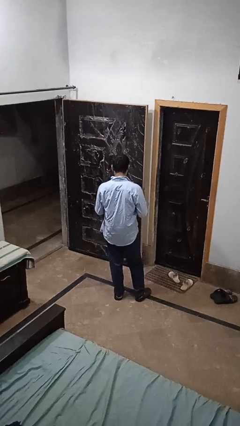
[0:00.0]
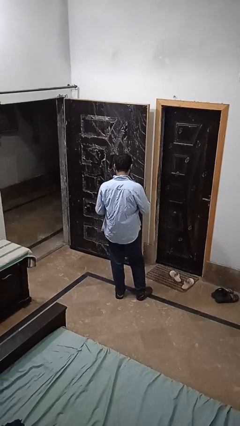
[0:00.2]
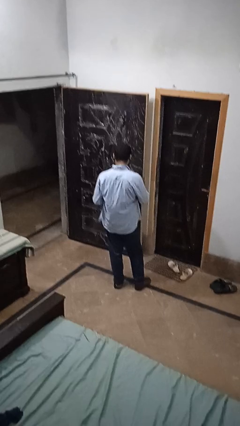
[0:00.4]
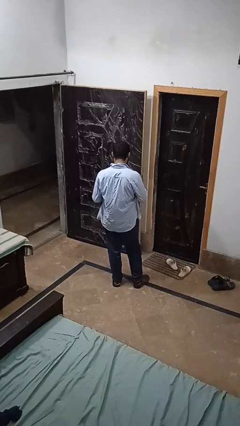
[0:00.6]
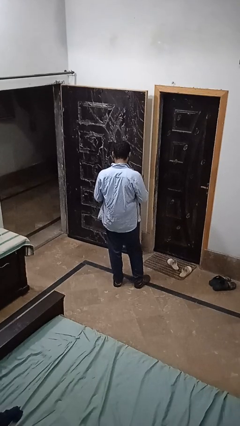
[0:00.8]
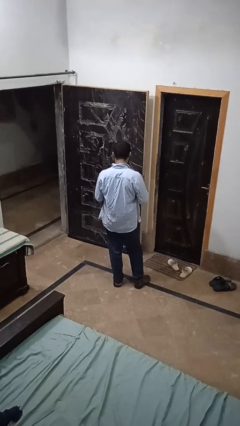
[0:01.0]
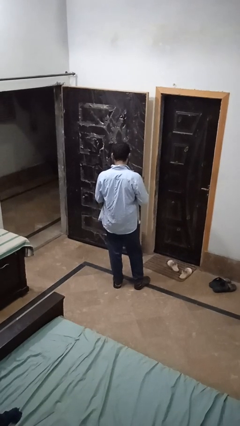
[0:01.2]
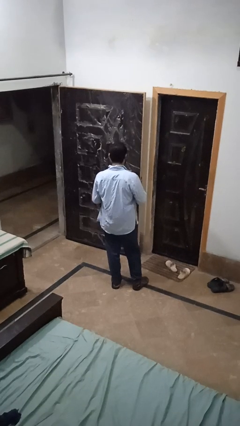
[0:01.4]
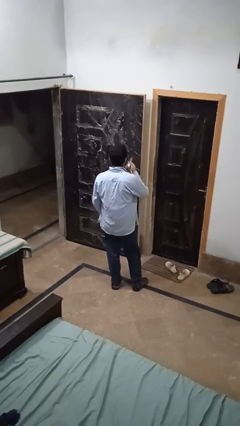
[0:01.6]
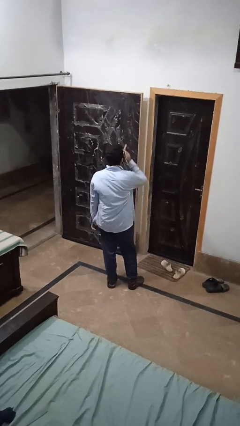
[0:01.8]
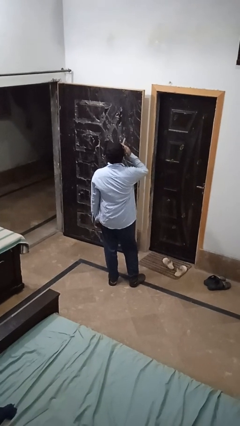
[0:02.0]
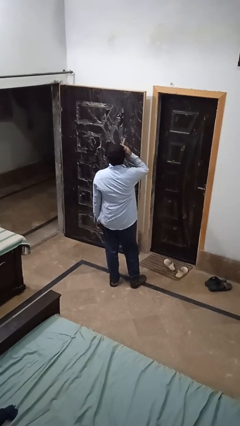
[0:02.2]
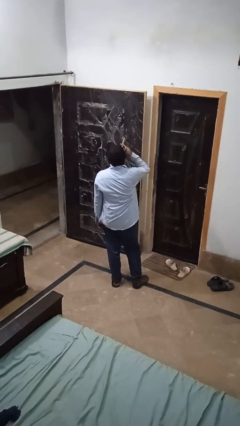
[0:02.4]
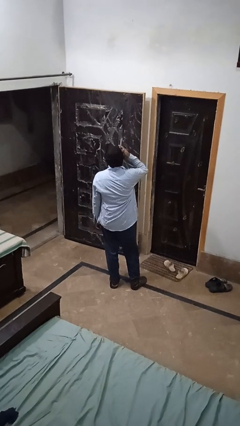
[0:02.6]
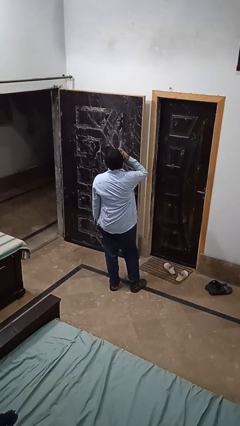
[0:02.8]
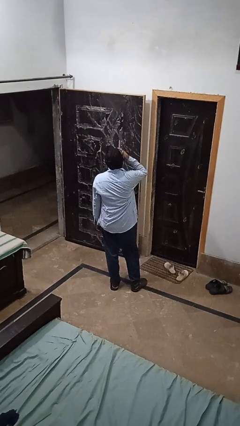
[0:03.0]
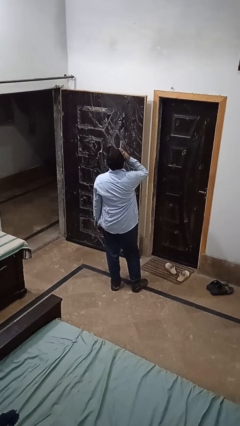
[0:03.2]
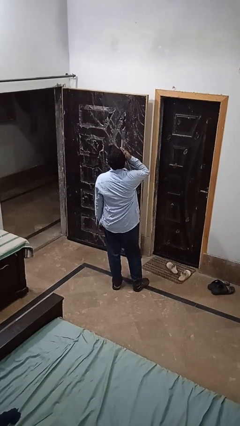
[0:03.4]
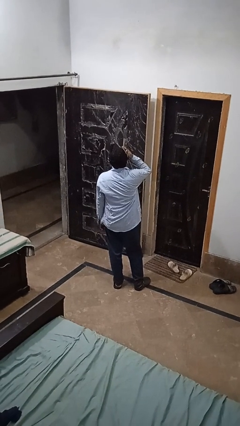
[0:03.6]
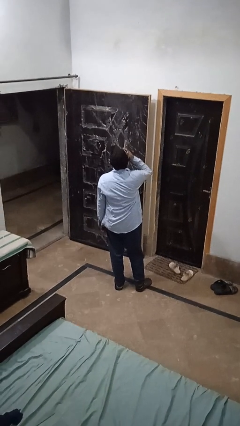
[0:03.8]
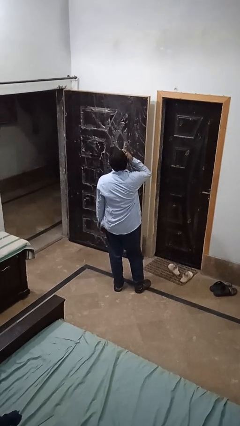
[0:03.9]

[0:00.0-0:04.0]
person vapes

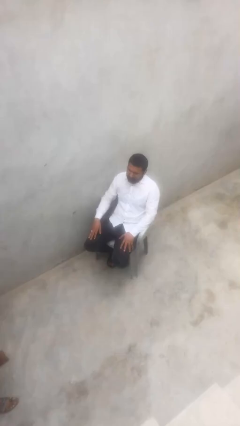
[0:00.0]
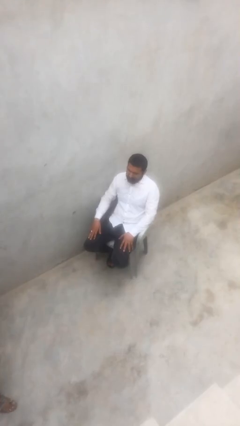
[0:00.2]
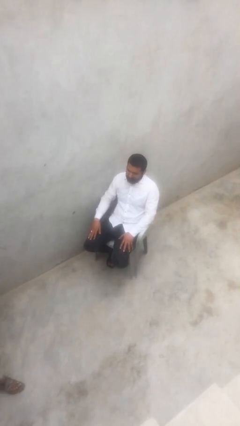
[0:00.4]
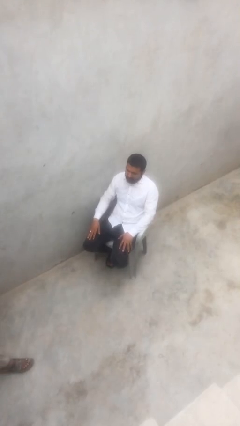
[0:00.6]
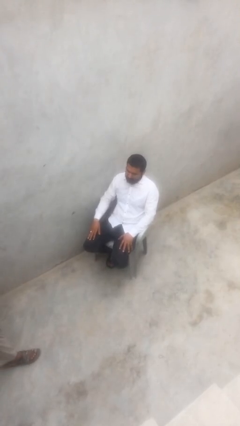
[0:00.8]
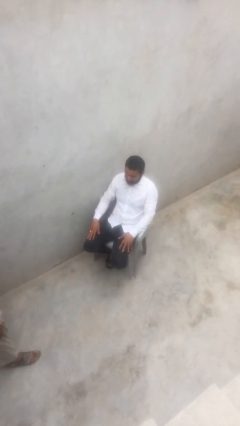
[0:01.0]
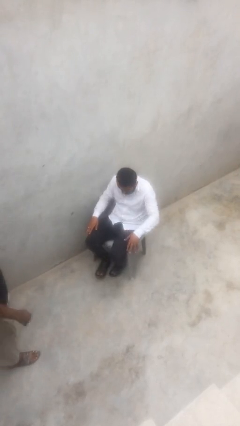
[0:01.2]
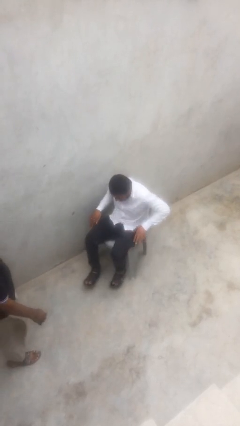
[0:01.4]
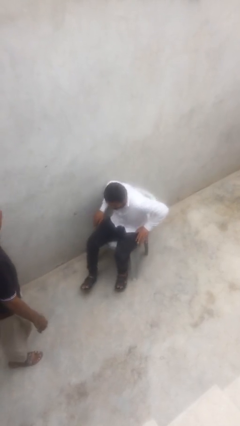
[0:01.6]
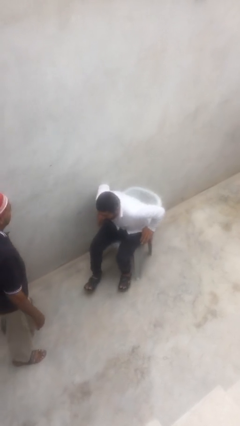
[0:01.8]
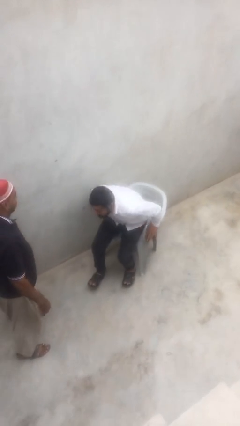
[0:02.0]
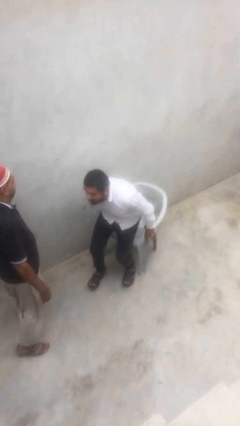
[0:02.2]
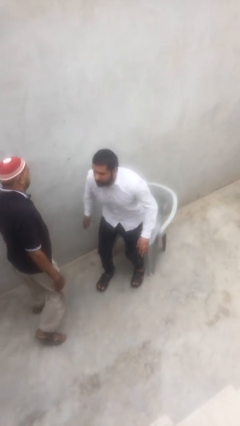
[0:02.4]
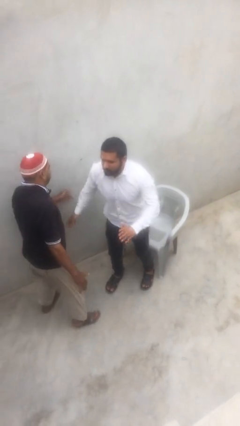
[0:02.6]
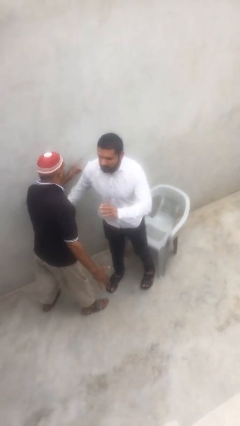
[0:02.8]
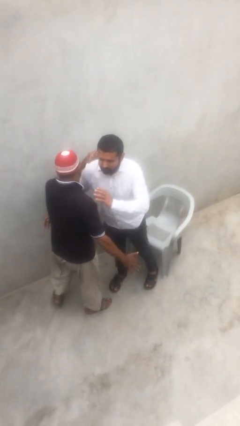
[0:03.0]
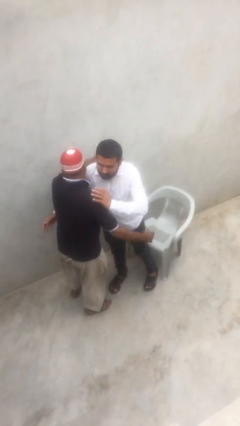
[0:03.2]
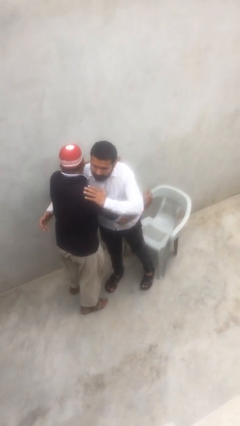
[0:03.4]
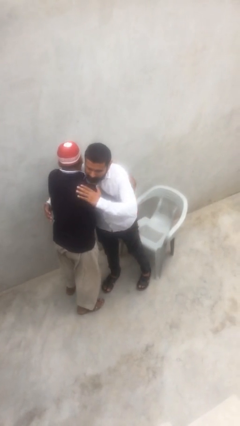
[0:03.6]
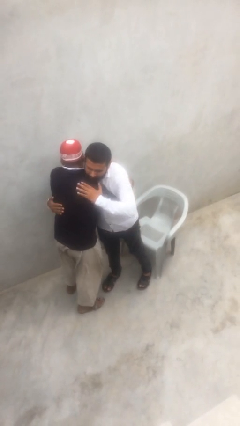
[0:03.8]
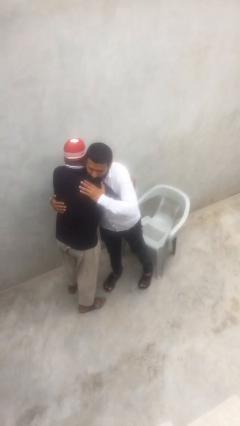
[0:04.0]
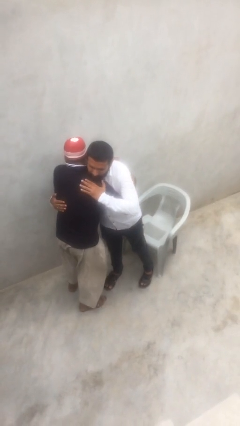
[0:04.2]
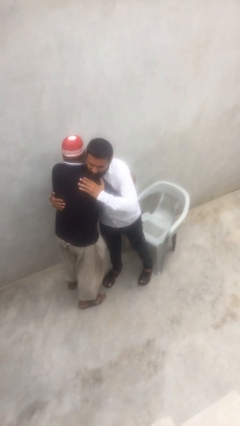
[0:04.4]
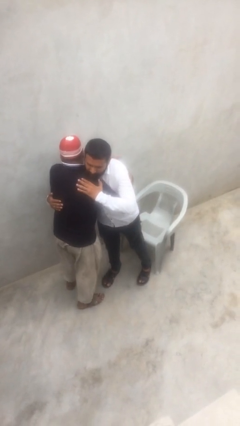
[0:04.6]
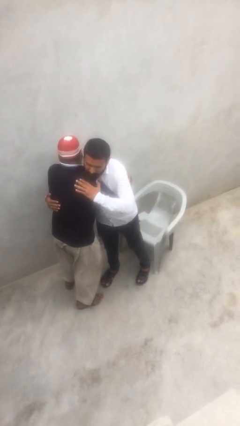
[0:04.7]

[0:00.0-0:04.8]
person embraces person

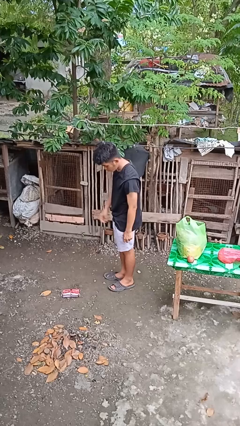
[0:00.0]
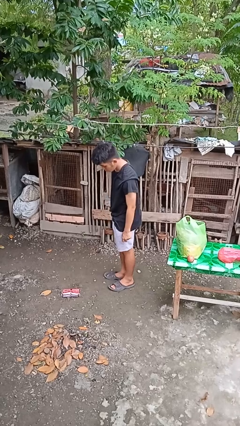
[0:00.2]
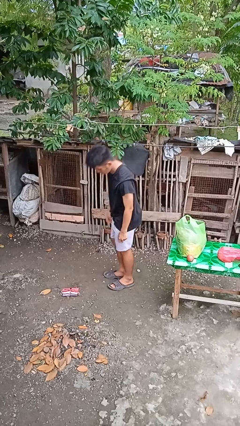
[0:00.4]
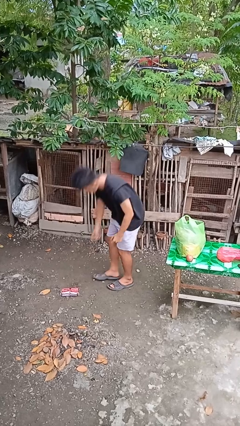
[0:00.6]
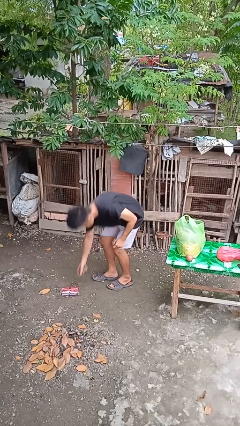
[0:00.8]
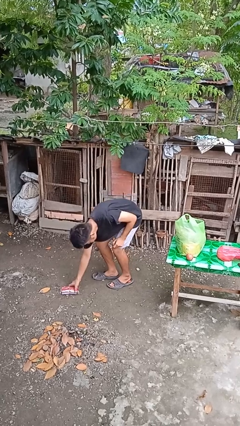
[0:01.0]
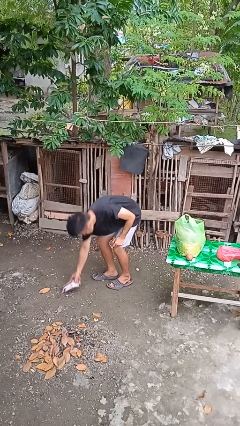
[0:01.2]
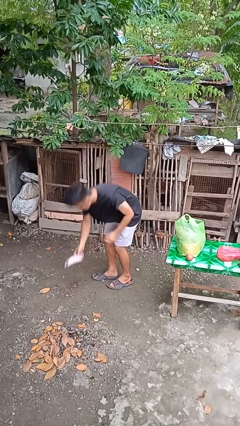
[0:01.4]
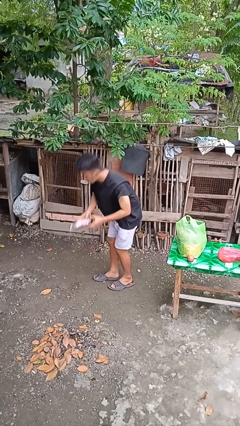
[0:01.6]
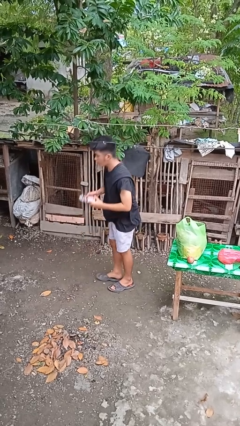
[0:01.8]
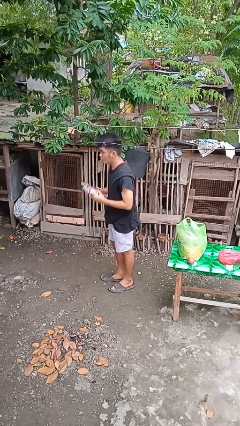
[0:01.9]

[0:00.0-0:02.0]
person picks up object from floor

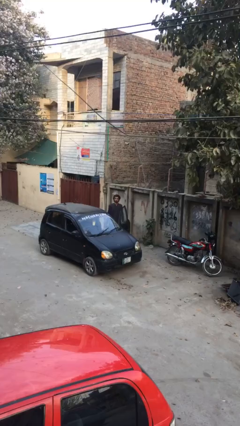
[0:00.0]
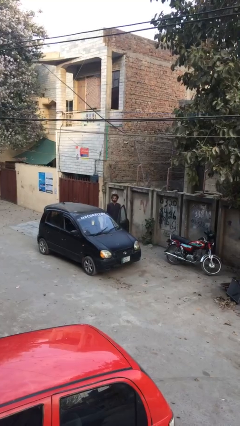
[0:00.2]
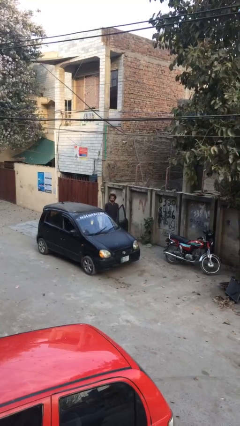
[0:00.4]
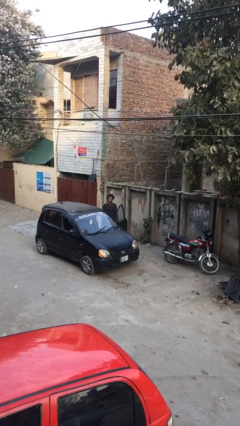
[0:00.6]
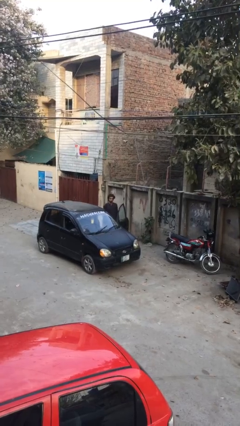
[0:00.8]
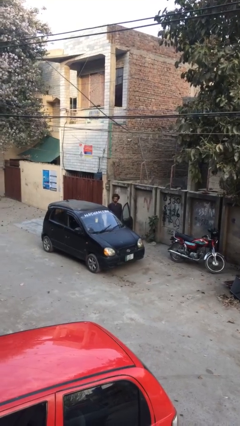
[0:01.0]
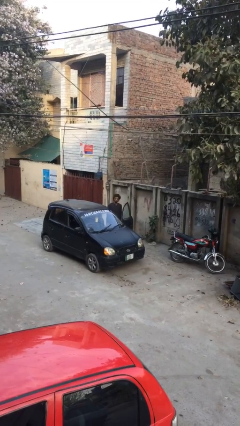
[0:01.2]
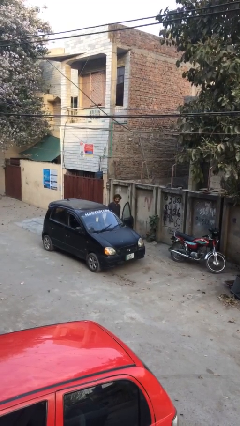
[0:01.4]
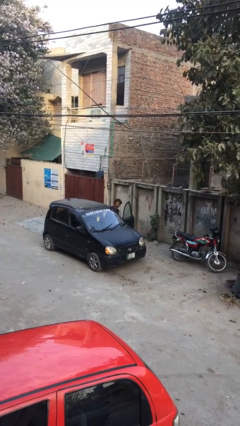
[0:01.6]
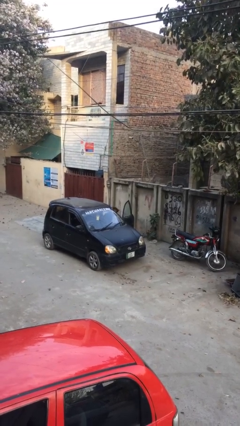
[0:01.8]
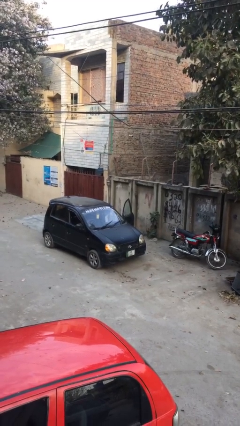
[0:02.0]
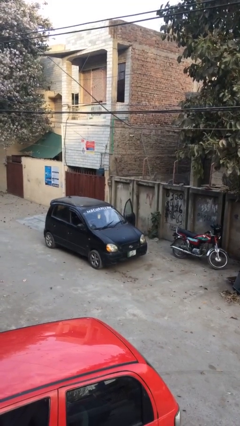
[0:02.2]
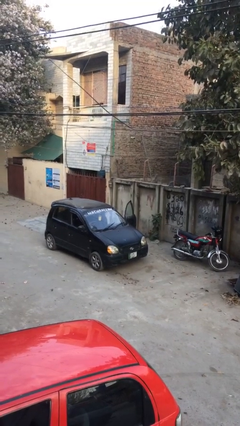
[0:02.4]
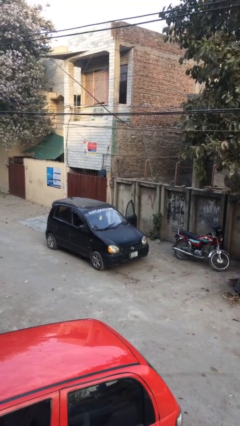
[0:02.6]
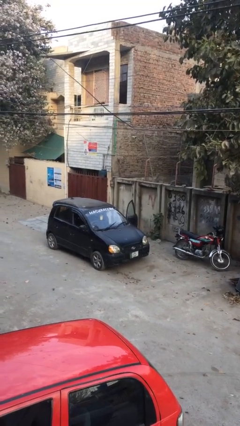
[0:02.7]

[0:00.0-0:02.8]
person enters car

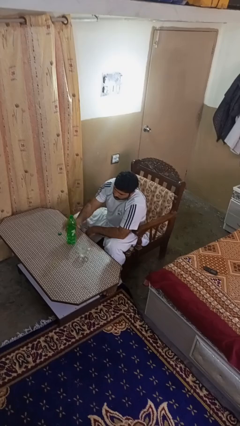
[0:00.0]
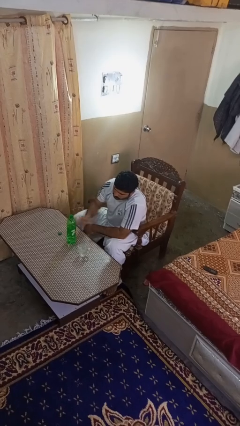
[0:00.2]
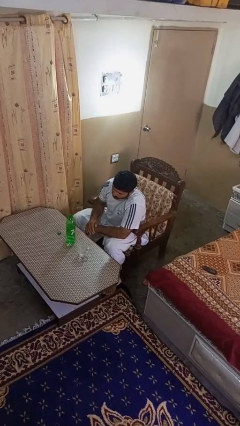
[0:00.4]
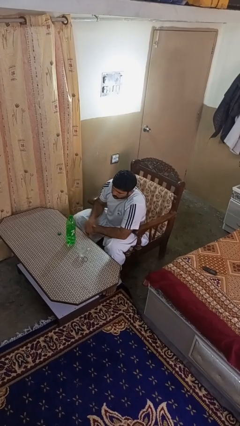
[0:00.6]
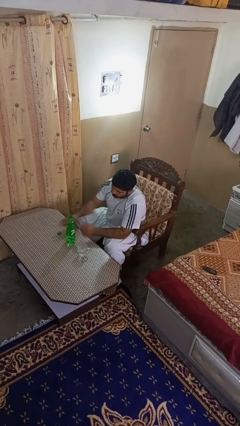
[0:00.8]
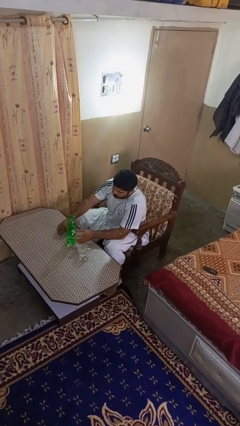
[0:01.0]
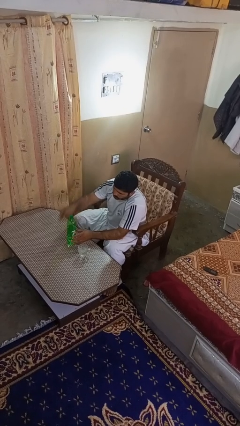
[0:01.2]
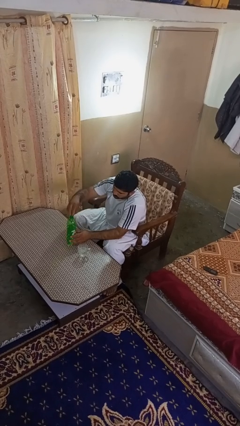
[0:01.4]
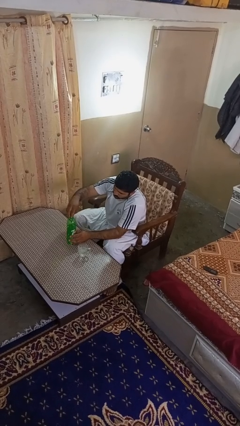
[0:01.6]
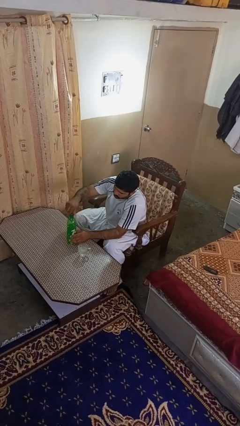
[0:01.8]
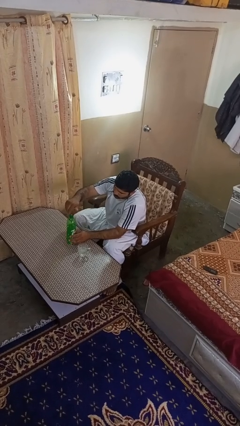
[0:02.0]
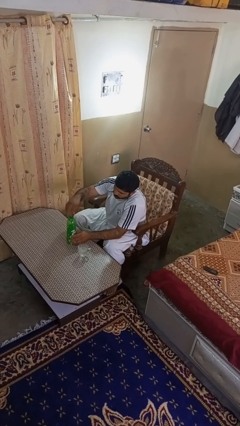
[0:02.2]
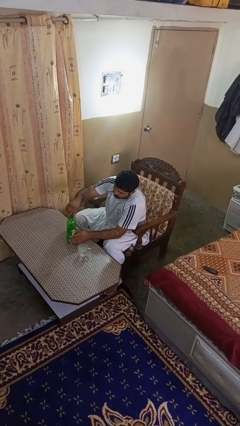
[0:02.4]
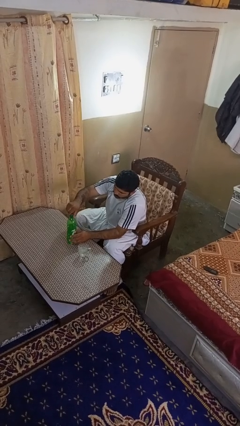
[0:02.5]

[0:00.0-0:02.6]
person screws lid to bottle

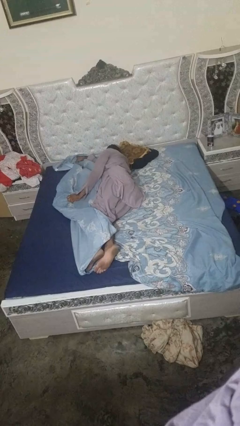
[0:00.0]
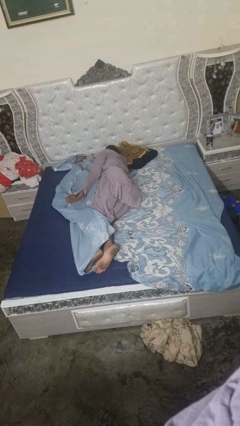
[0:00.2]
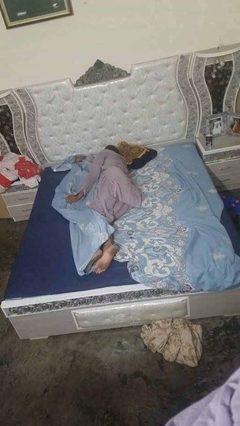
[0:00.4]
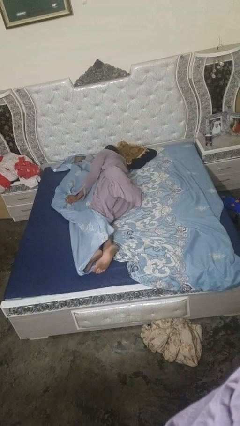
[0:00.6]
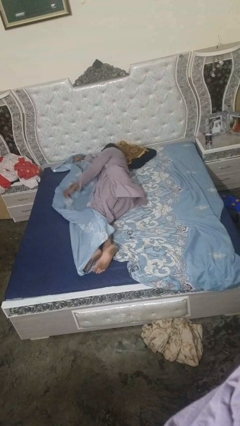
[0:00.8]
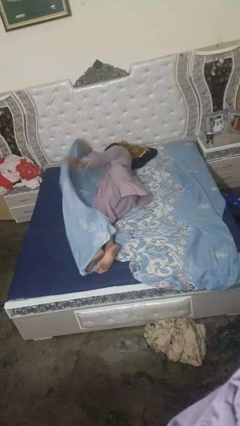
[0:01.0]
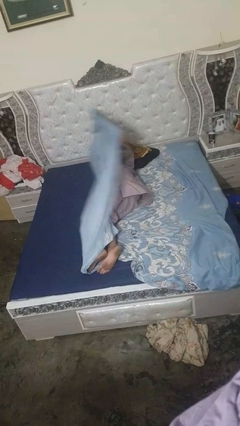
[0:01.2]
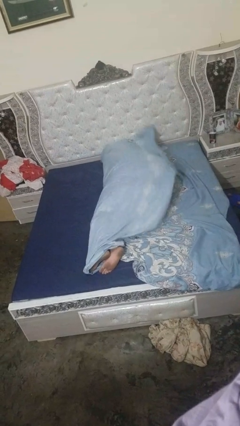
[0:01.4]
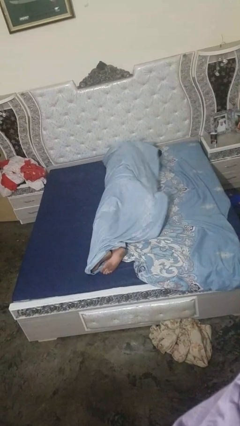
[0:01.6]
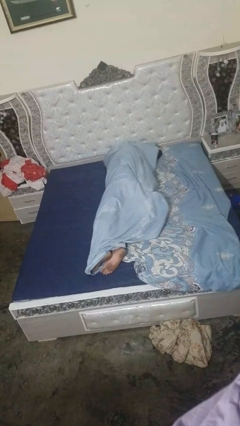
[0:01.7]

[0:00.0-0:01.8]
person covers with bedsheets
